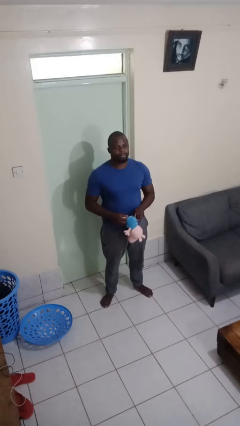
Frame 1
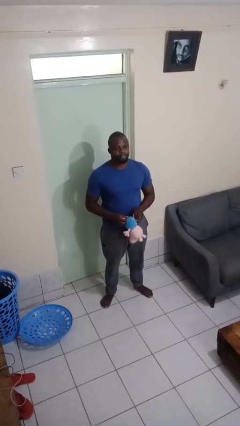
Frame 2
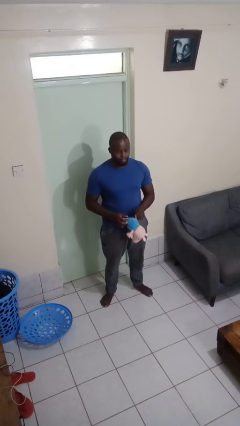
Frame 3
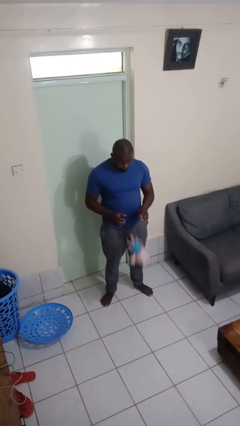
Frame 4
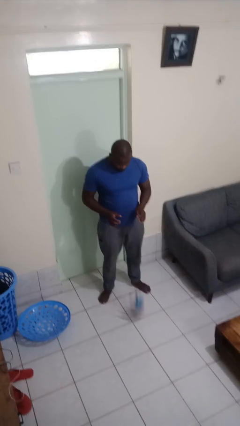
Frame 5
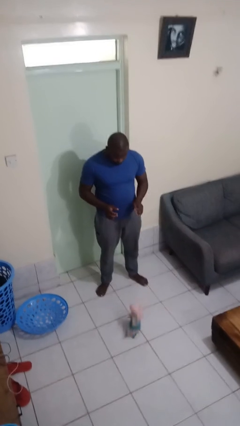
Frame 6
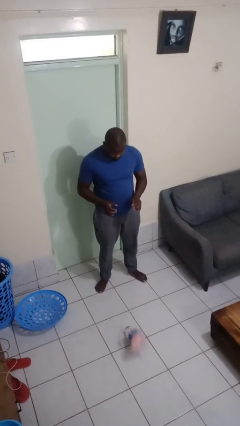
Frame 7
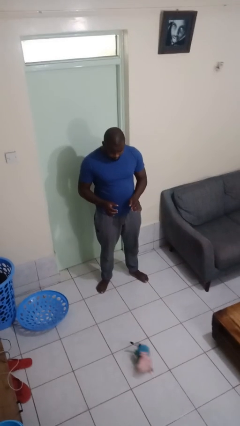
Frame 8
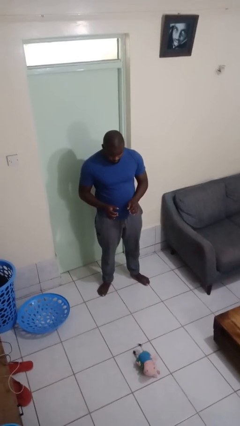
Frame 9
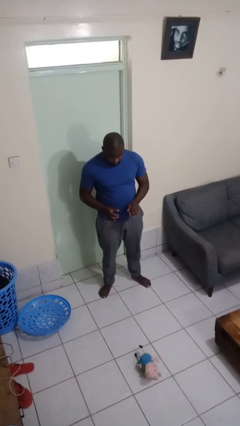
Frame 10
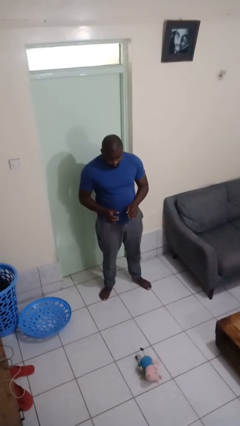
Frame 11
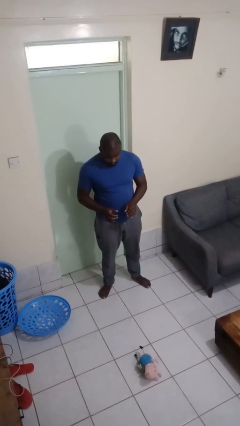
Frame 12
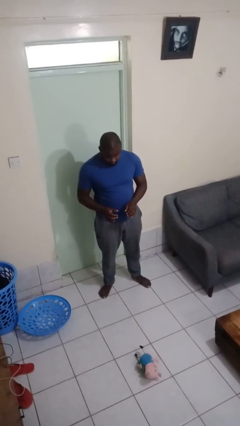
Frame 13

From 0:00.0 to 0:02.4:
person drops object

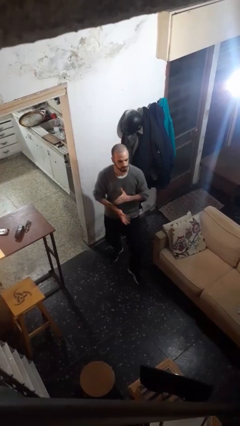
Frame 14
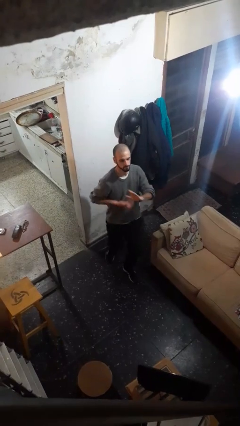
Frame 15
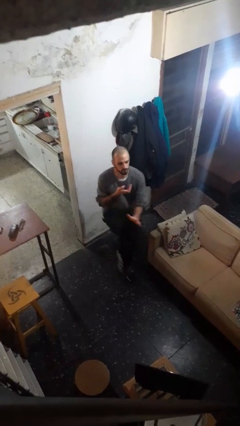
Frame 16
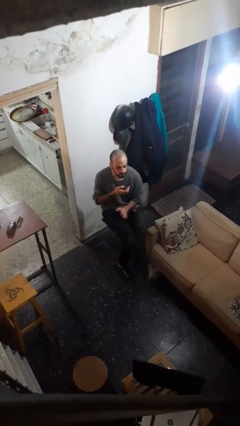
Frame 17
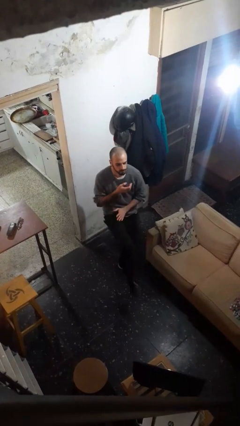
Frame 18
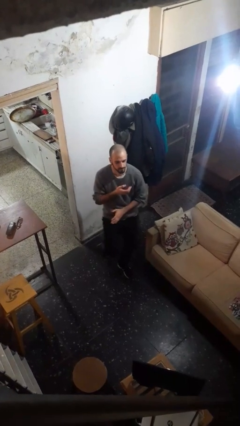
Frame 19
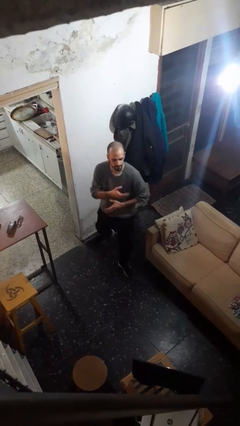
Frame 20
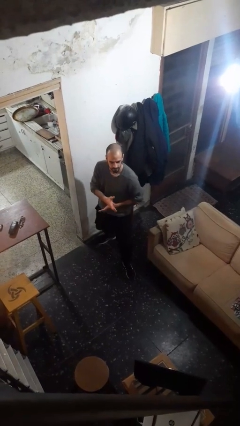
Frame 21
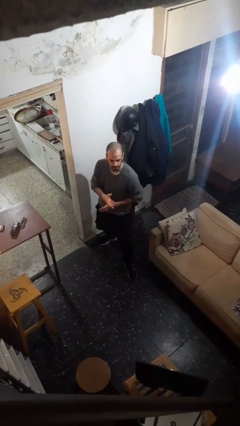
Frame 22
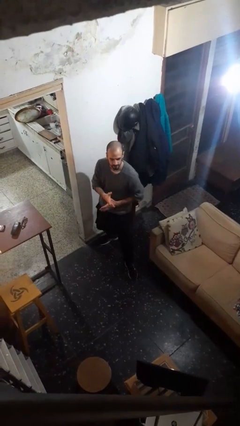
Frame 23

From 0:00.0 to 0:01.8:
person karate kicks

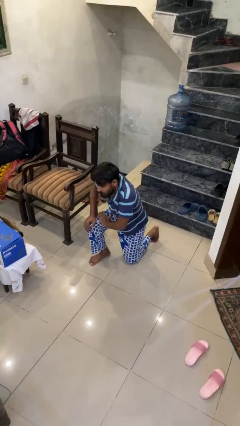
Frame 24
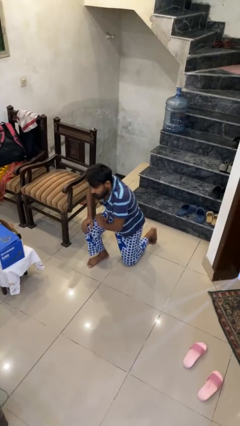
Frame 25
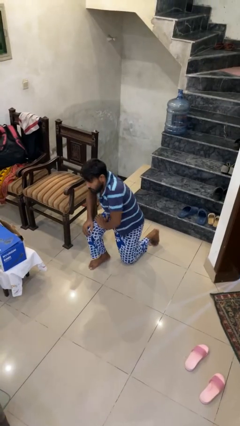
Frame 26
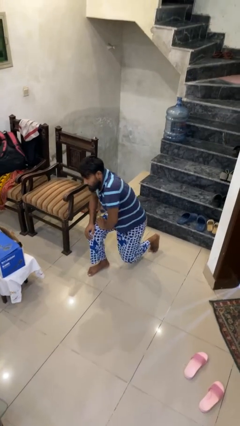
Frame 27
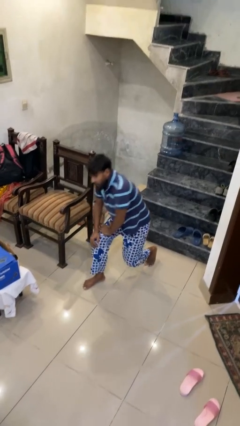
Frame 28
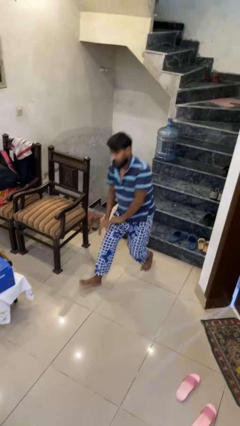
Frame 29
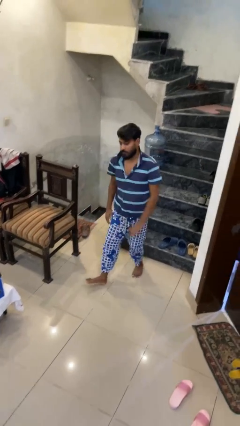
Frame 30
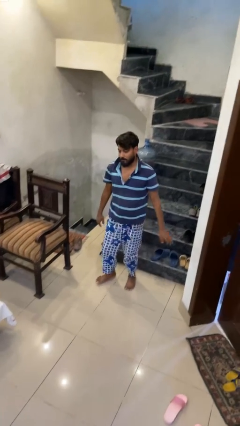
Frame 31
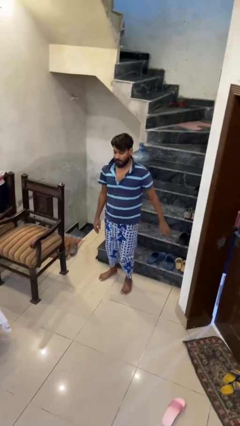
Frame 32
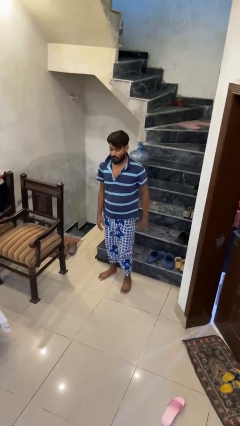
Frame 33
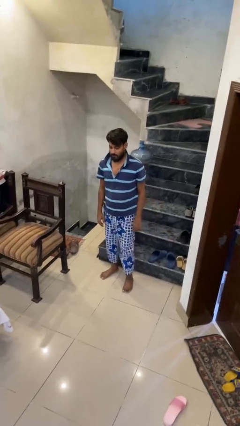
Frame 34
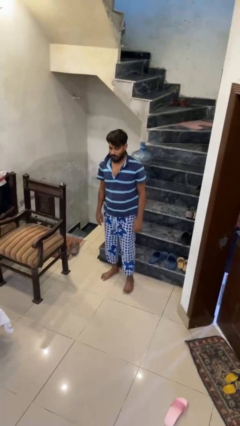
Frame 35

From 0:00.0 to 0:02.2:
person stands up from floor

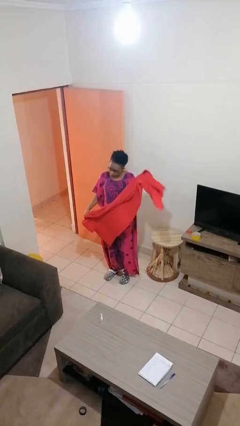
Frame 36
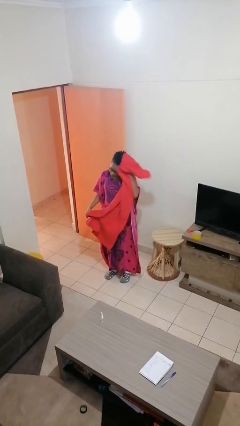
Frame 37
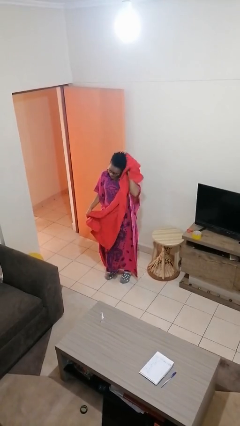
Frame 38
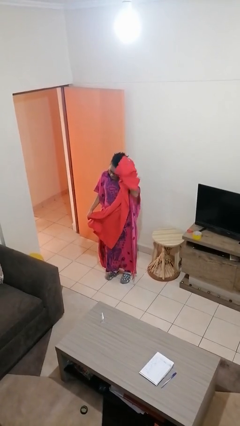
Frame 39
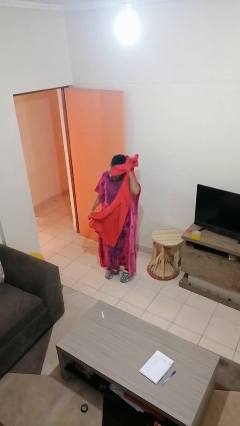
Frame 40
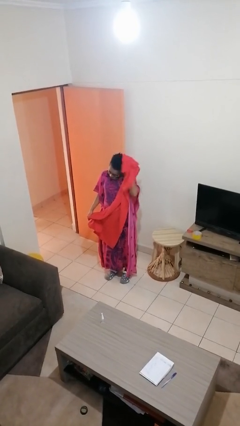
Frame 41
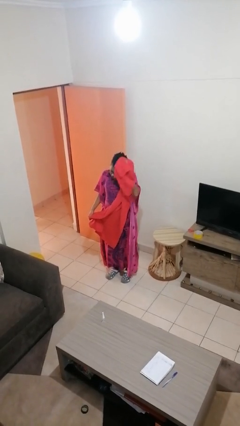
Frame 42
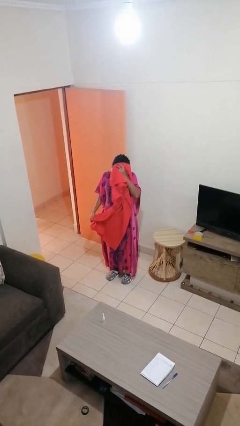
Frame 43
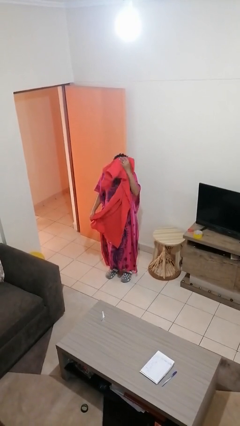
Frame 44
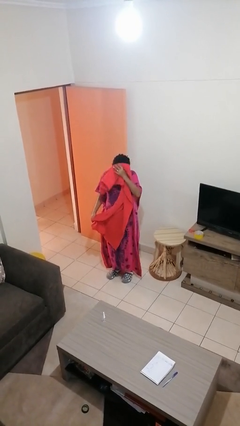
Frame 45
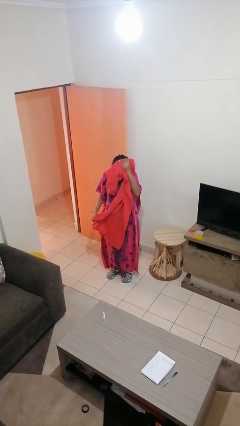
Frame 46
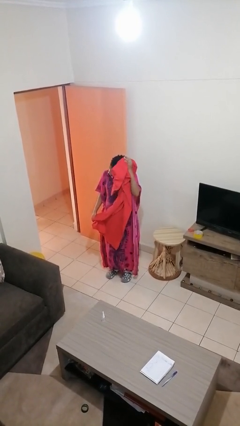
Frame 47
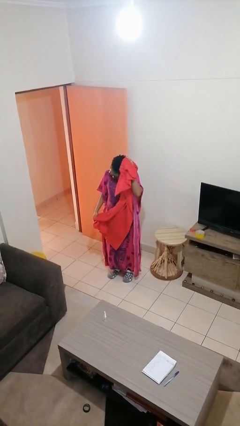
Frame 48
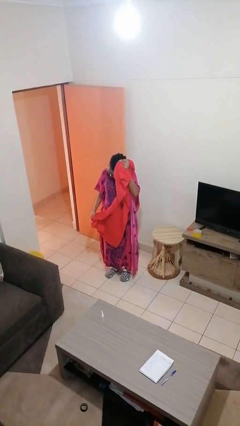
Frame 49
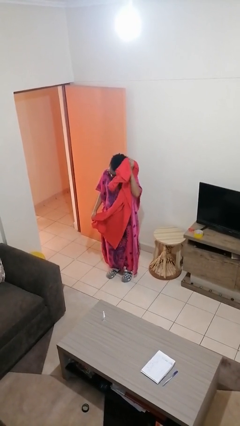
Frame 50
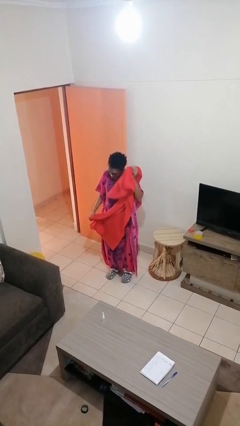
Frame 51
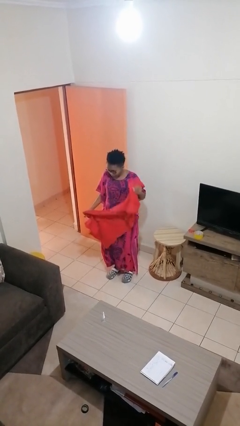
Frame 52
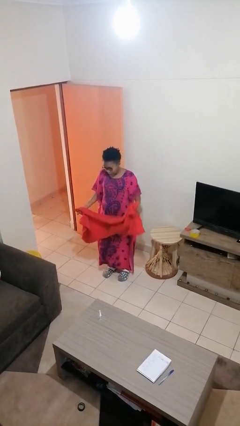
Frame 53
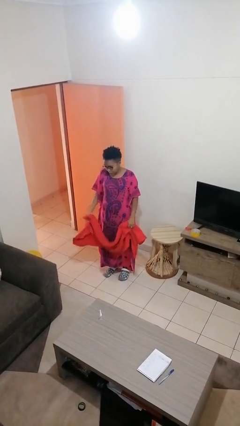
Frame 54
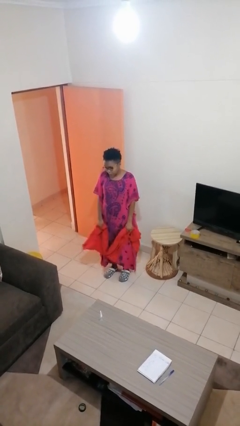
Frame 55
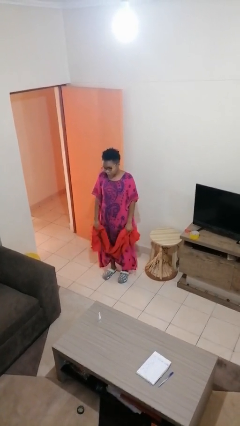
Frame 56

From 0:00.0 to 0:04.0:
person dries hair with towel

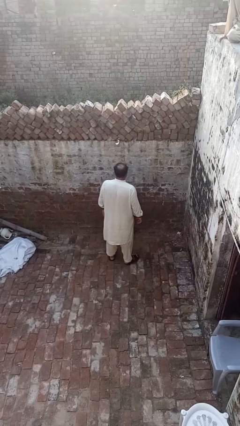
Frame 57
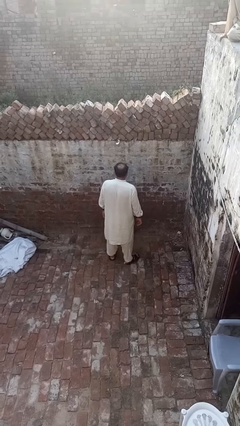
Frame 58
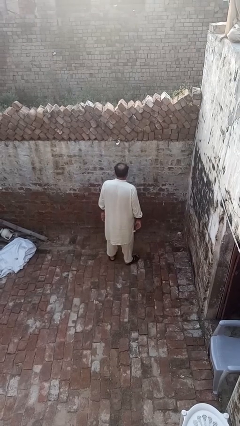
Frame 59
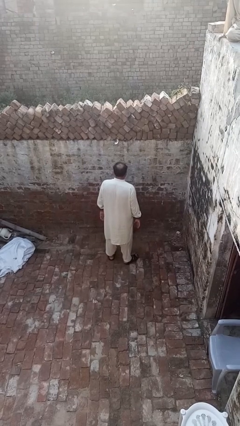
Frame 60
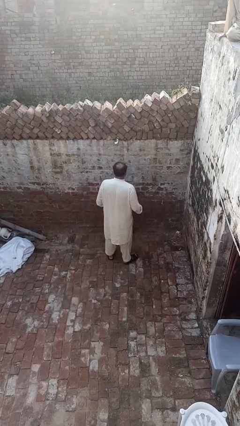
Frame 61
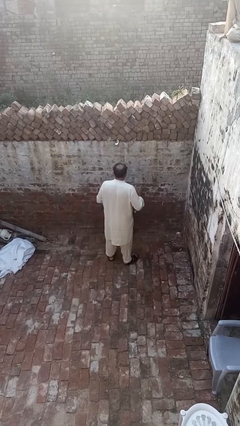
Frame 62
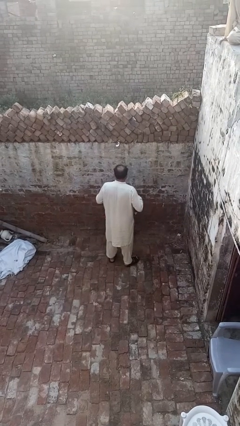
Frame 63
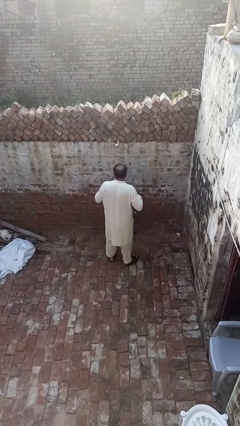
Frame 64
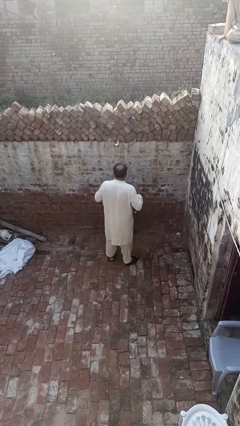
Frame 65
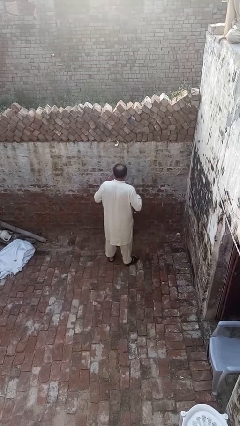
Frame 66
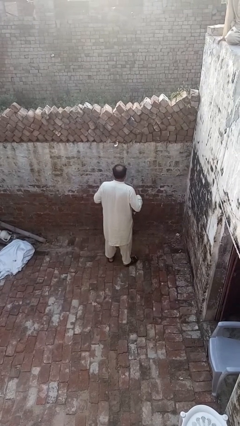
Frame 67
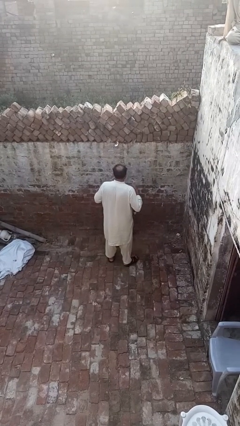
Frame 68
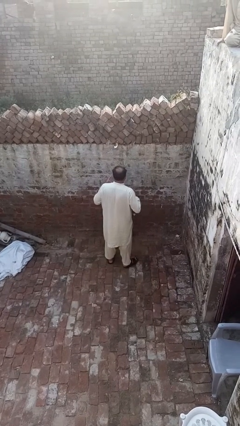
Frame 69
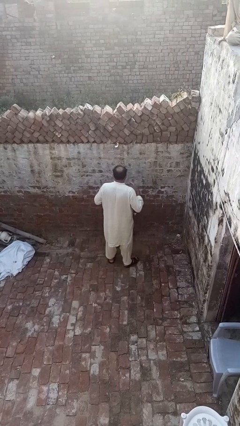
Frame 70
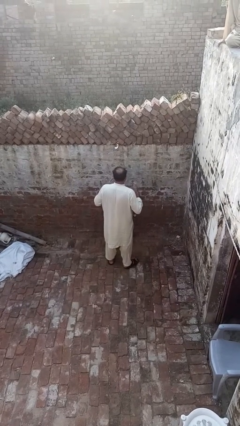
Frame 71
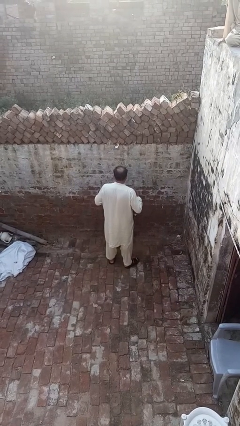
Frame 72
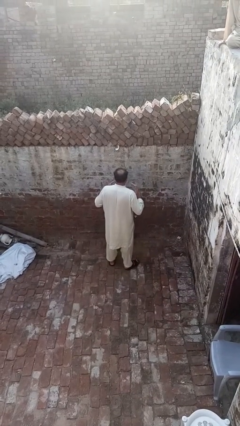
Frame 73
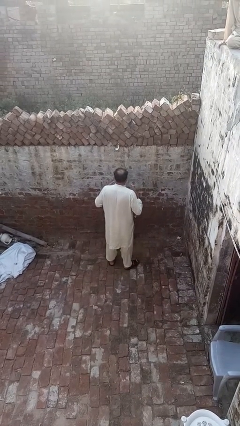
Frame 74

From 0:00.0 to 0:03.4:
person drums on chest

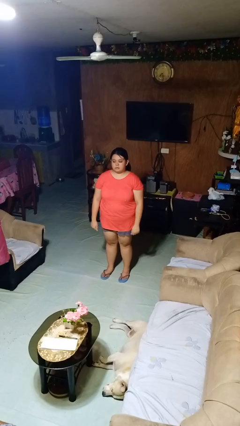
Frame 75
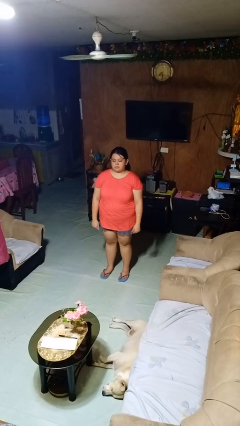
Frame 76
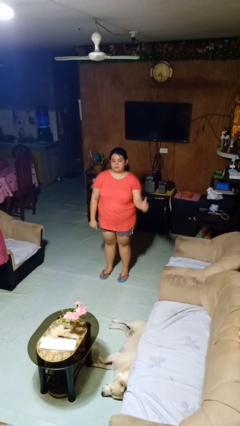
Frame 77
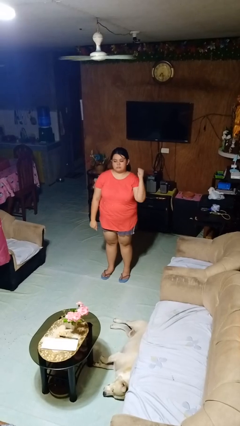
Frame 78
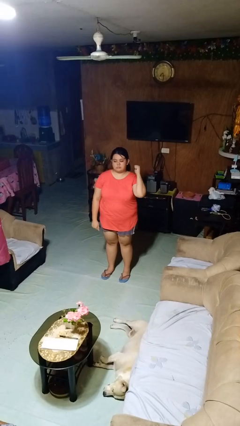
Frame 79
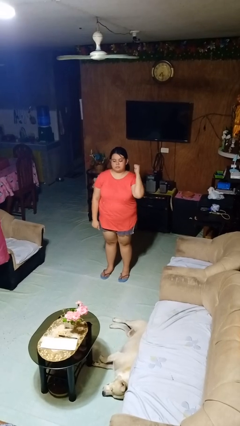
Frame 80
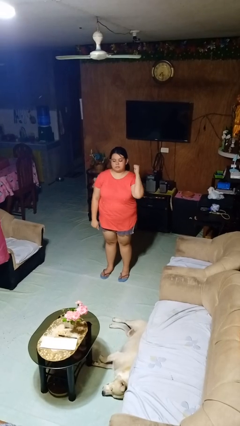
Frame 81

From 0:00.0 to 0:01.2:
person gestures behind me

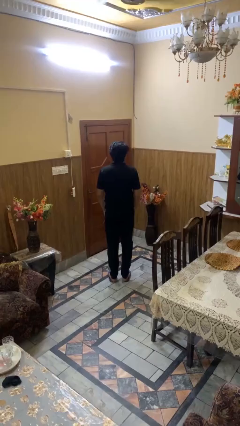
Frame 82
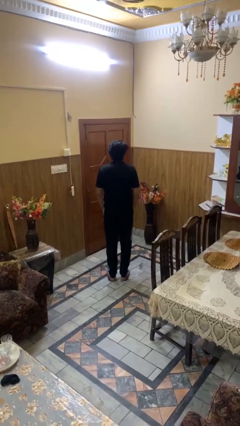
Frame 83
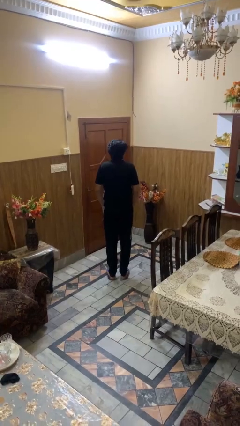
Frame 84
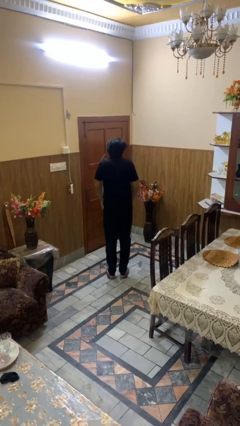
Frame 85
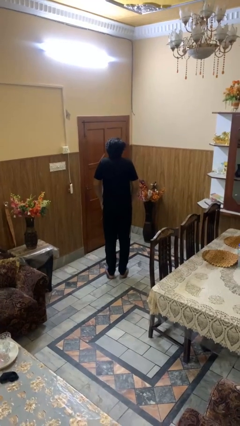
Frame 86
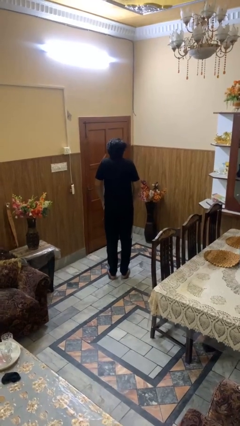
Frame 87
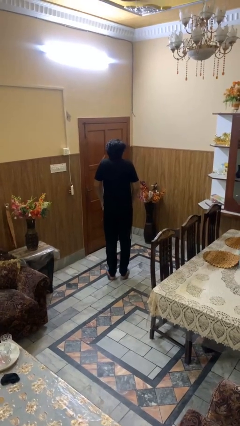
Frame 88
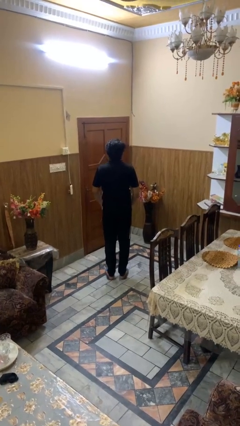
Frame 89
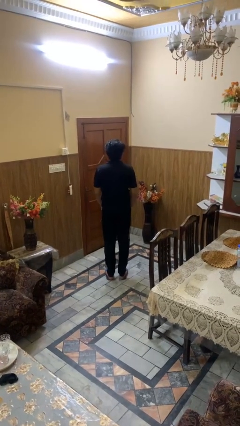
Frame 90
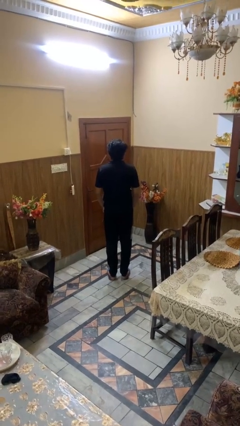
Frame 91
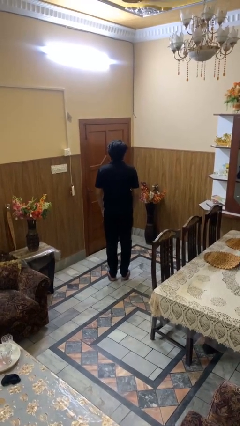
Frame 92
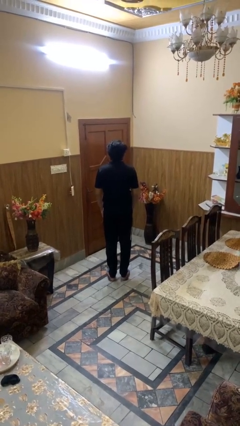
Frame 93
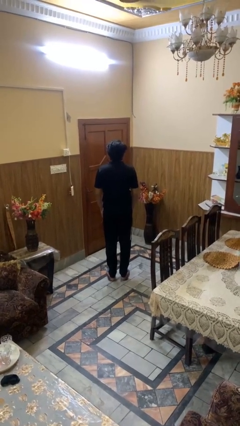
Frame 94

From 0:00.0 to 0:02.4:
person shrugs
